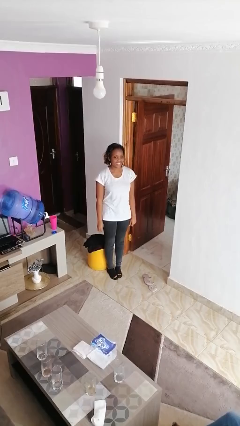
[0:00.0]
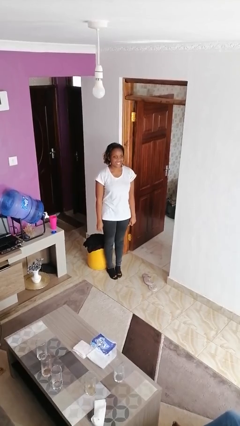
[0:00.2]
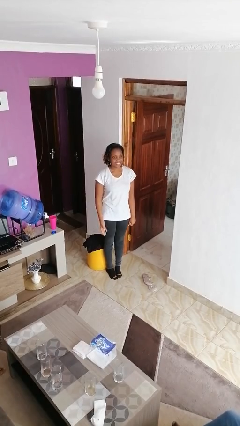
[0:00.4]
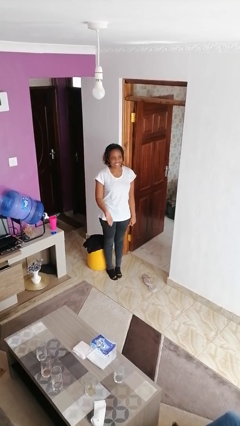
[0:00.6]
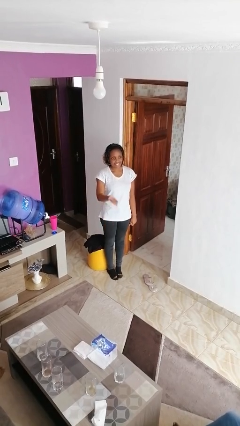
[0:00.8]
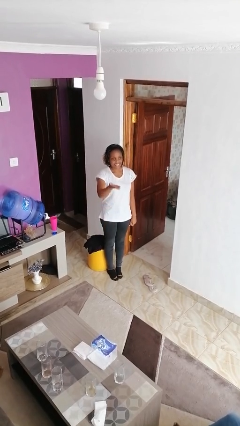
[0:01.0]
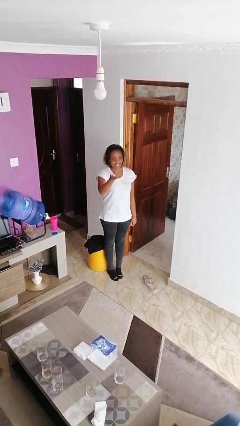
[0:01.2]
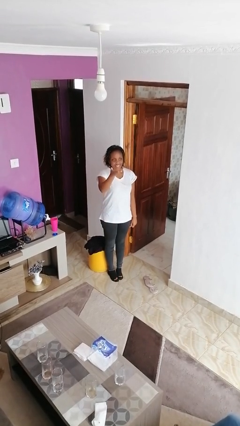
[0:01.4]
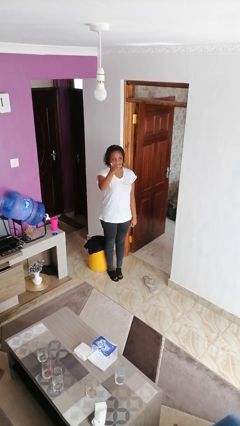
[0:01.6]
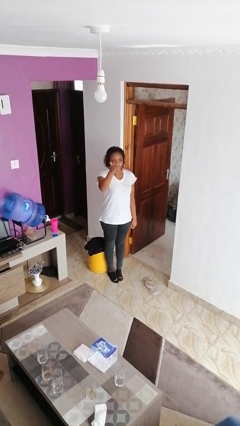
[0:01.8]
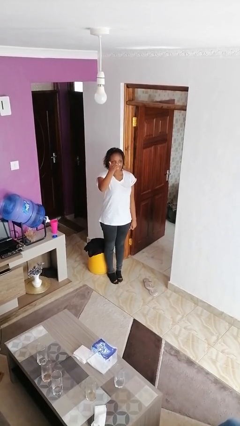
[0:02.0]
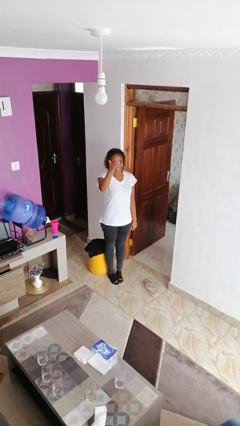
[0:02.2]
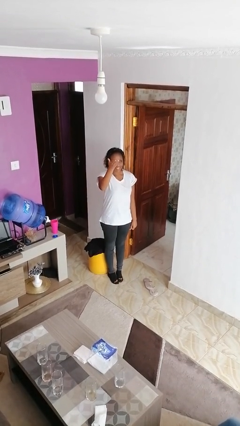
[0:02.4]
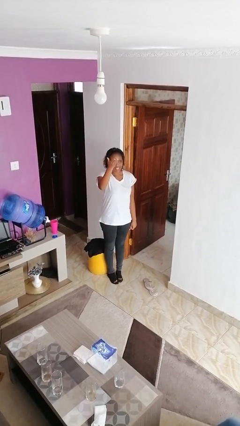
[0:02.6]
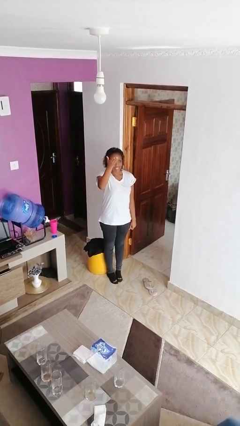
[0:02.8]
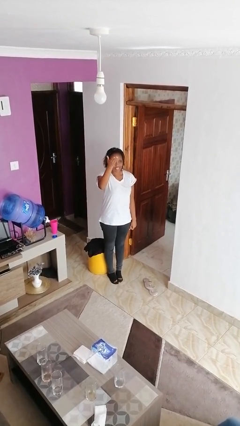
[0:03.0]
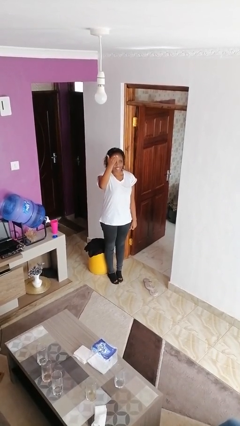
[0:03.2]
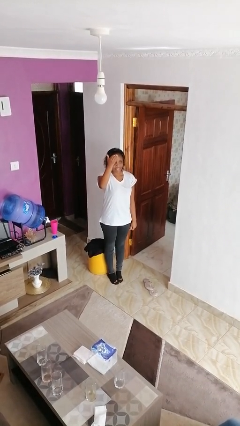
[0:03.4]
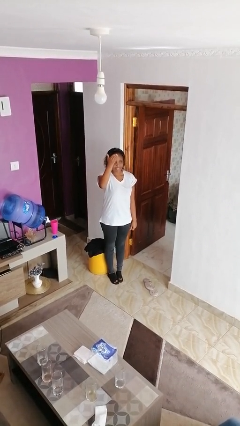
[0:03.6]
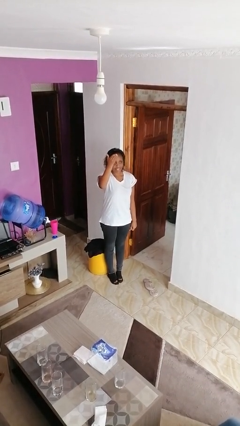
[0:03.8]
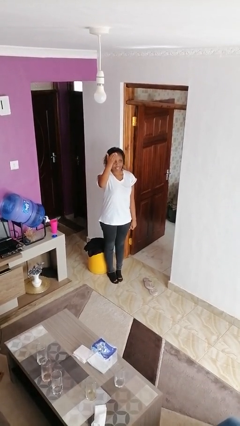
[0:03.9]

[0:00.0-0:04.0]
person gestures swipe up

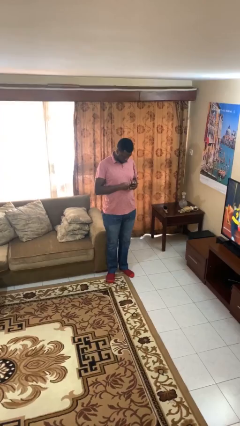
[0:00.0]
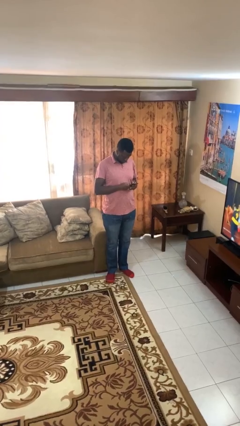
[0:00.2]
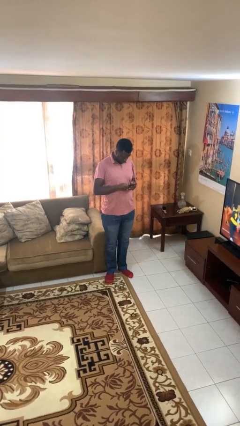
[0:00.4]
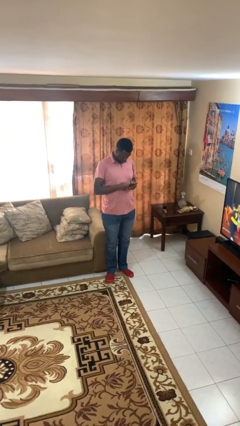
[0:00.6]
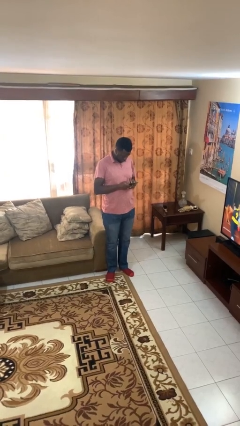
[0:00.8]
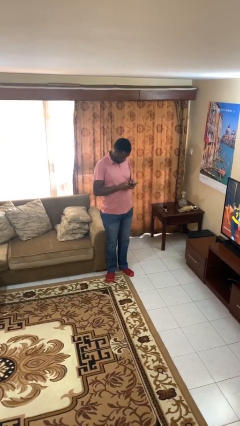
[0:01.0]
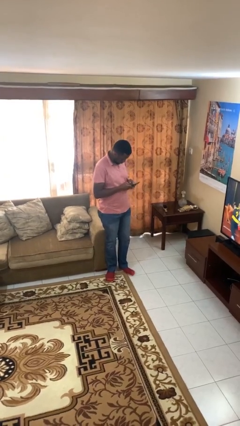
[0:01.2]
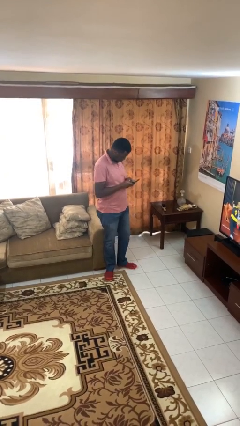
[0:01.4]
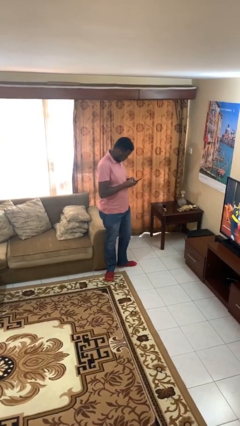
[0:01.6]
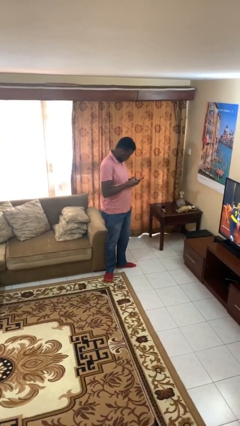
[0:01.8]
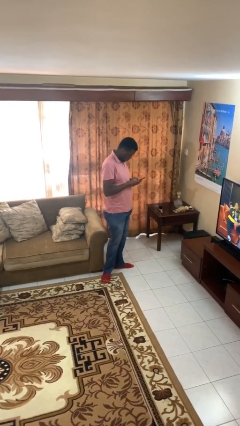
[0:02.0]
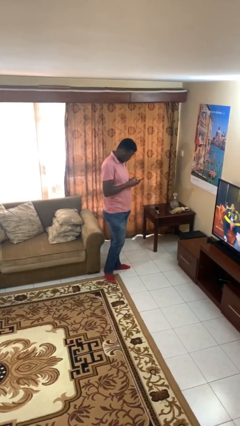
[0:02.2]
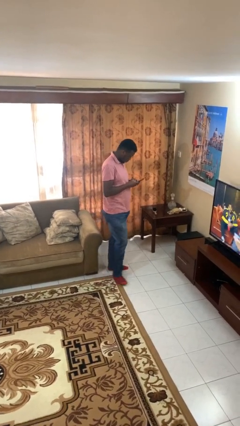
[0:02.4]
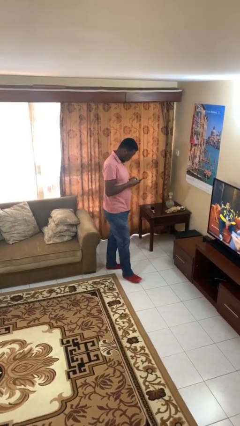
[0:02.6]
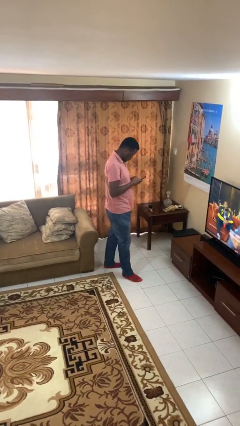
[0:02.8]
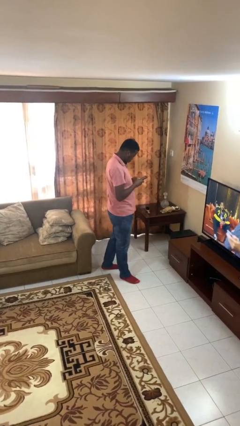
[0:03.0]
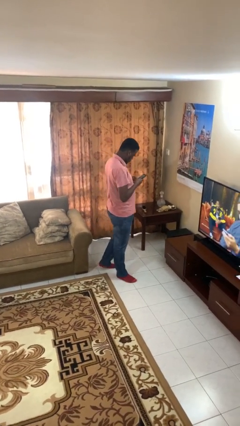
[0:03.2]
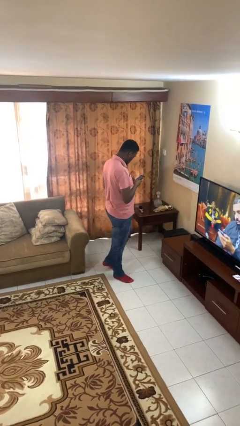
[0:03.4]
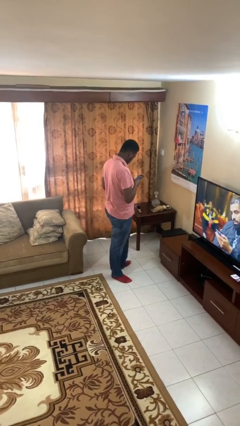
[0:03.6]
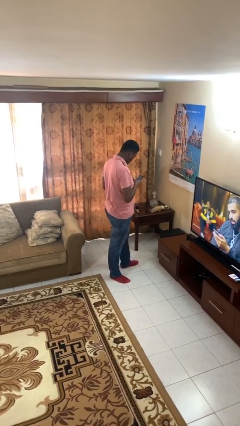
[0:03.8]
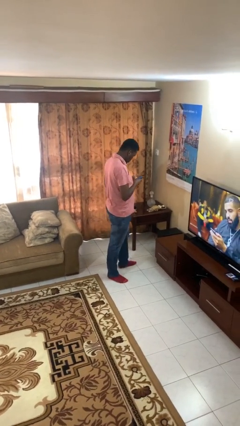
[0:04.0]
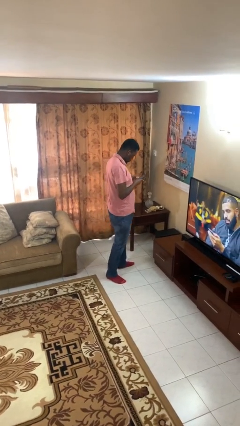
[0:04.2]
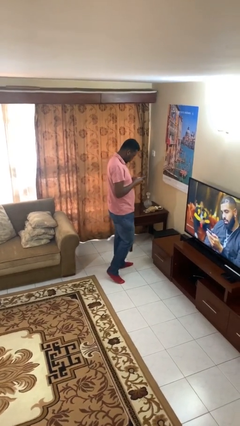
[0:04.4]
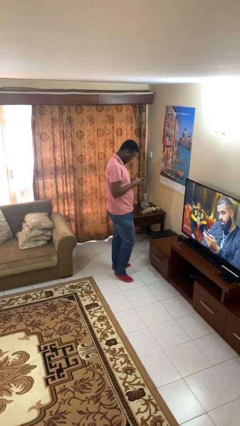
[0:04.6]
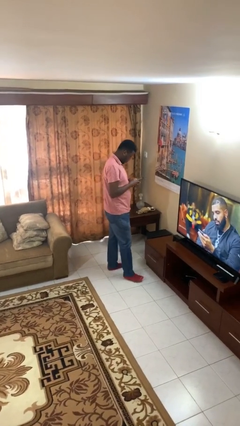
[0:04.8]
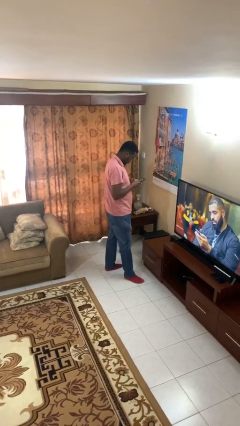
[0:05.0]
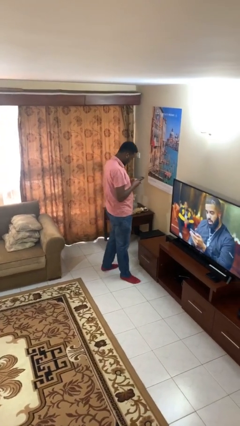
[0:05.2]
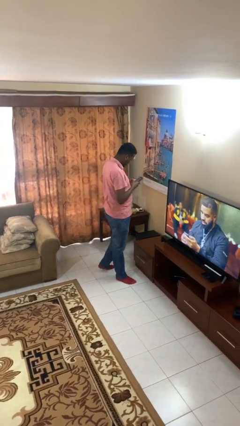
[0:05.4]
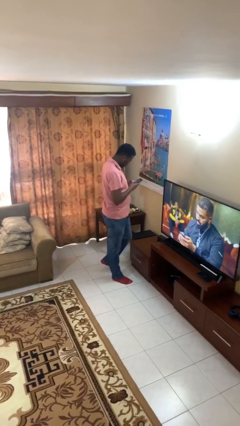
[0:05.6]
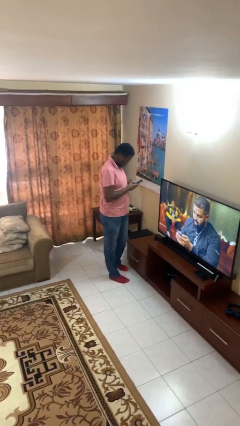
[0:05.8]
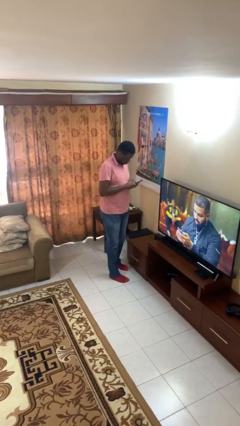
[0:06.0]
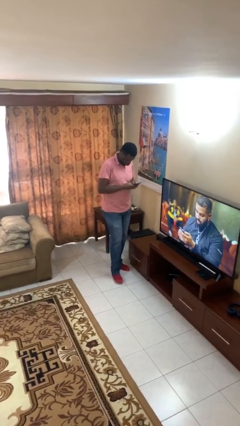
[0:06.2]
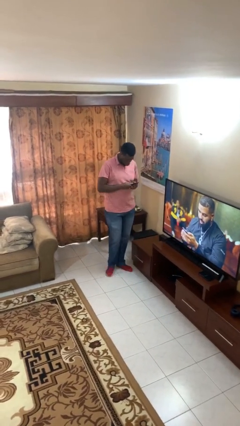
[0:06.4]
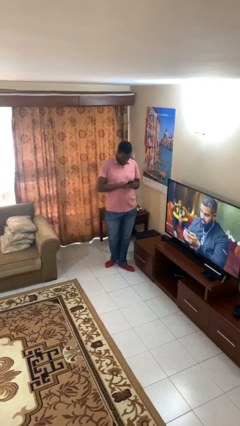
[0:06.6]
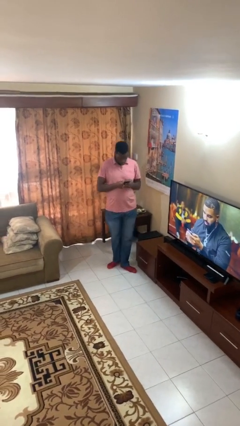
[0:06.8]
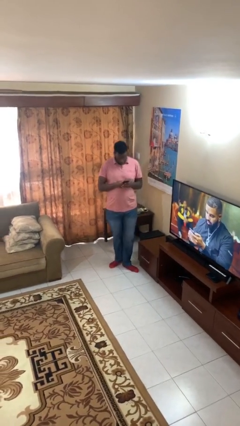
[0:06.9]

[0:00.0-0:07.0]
person texts on phone

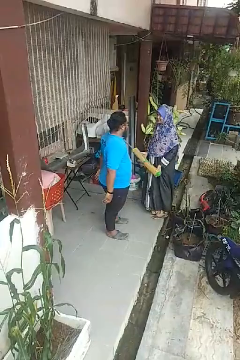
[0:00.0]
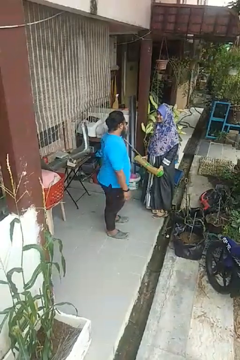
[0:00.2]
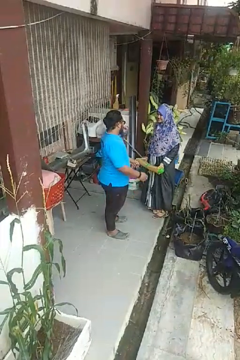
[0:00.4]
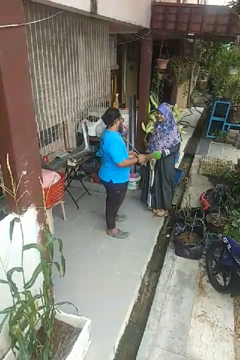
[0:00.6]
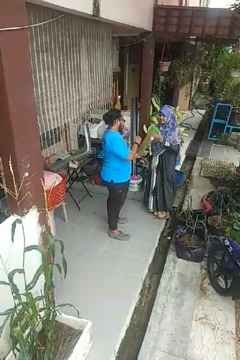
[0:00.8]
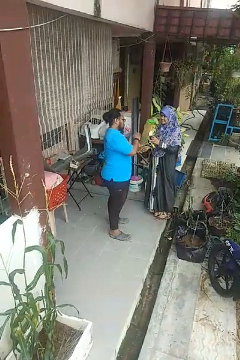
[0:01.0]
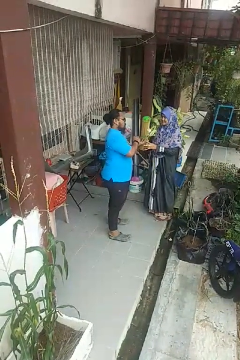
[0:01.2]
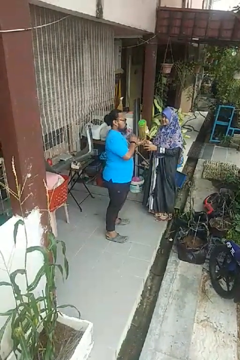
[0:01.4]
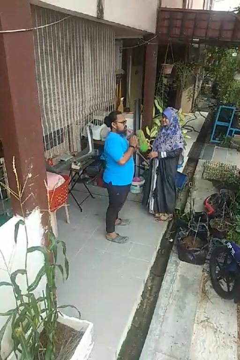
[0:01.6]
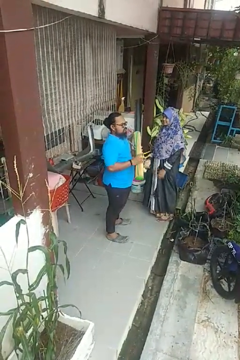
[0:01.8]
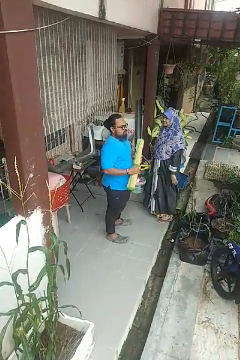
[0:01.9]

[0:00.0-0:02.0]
person transfers object to person

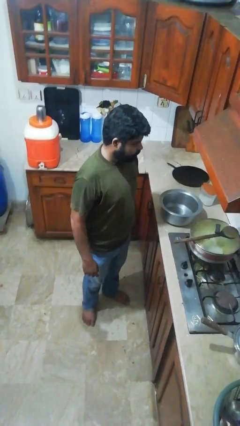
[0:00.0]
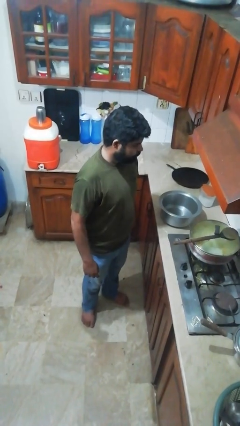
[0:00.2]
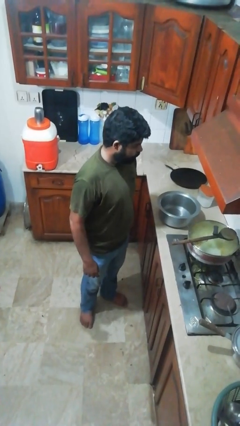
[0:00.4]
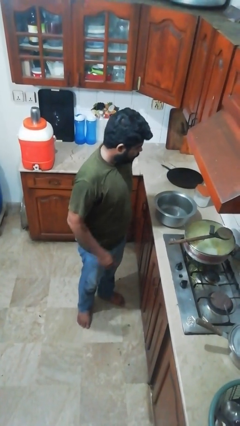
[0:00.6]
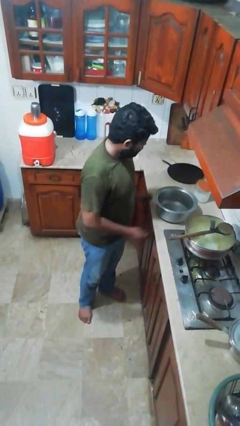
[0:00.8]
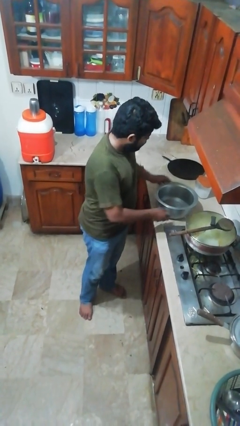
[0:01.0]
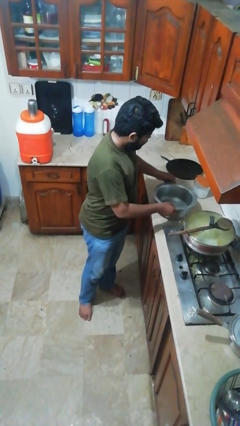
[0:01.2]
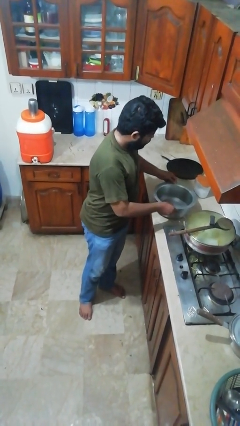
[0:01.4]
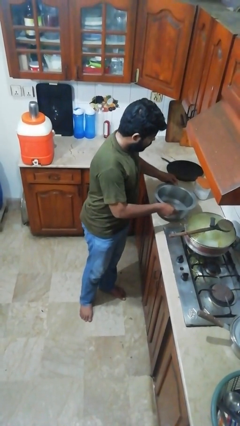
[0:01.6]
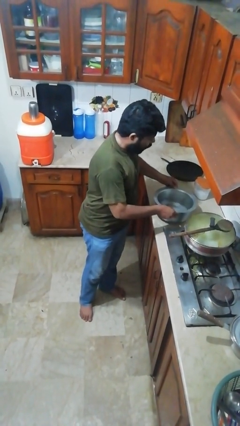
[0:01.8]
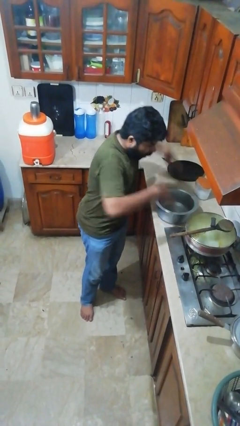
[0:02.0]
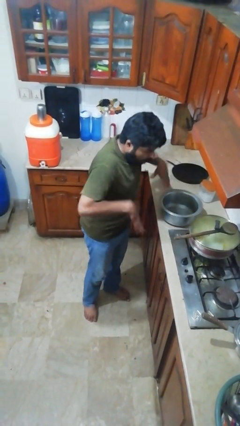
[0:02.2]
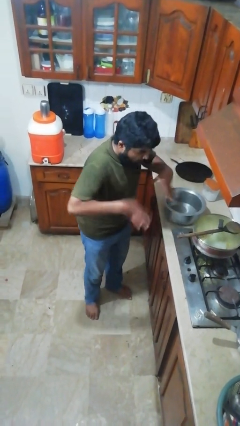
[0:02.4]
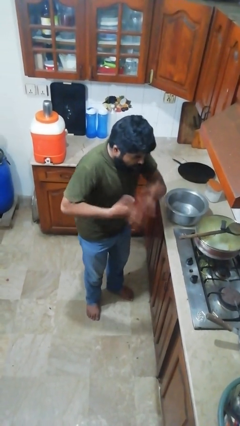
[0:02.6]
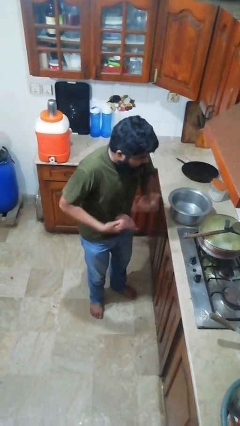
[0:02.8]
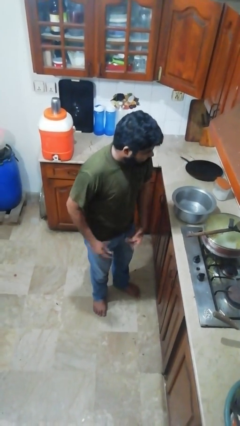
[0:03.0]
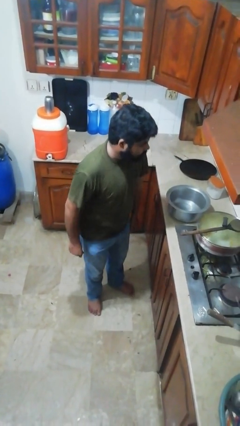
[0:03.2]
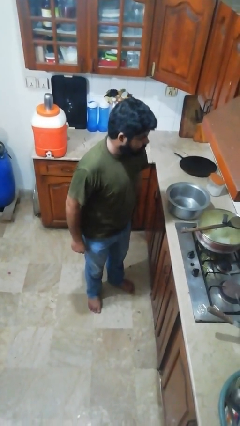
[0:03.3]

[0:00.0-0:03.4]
person burns hand

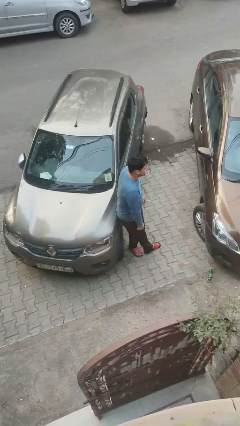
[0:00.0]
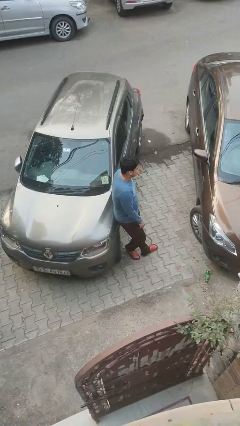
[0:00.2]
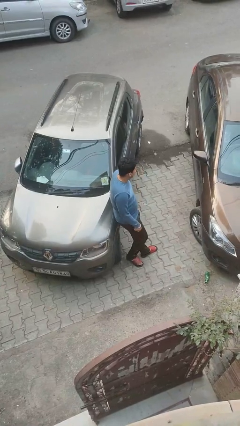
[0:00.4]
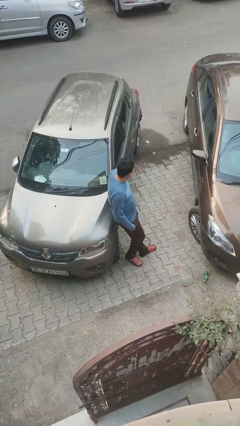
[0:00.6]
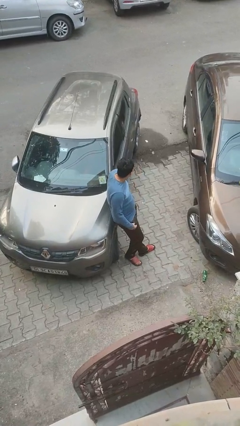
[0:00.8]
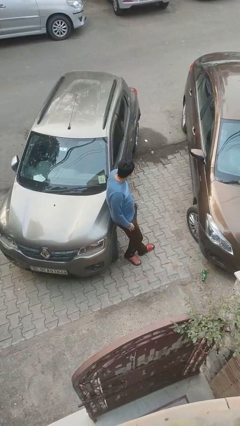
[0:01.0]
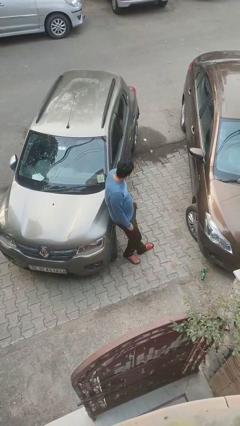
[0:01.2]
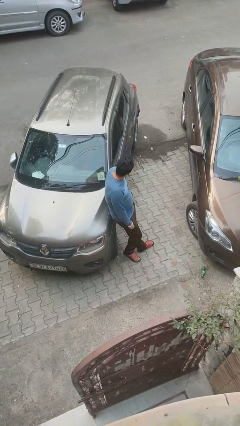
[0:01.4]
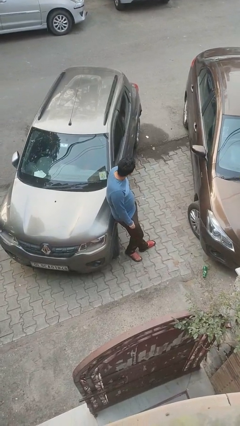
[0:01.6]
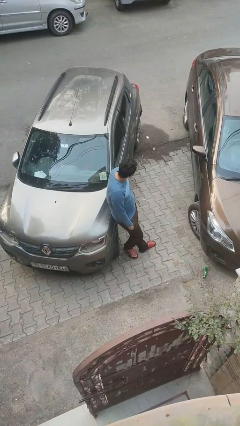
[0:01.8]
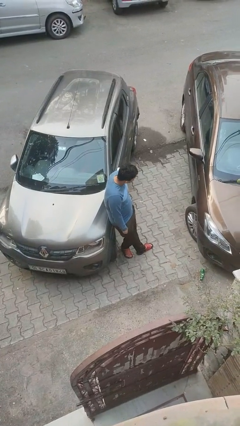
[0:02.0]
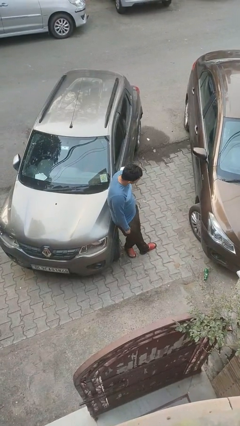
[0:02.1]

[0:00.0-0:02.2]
person leans against car
